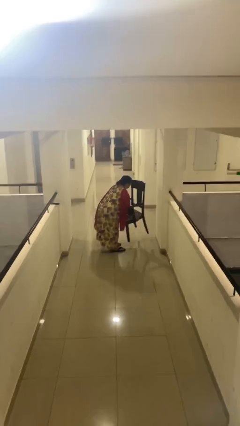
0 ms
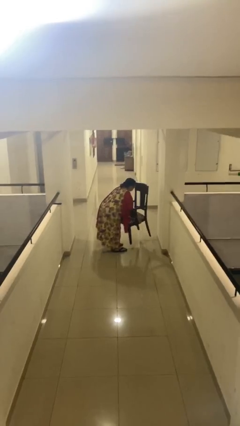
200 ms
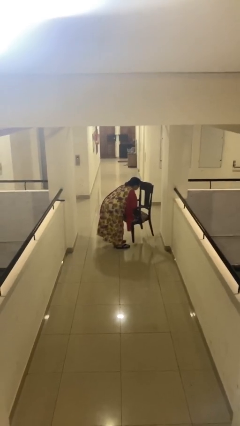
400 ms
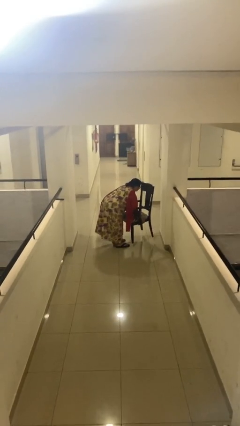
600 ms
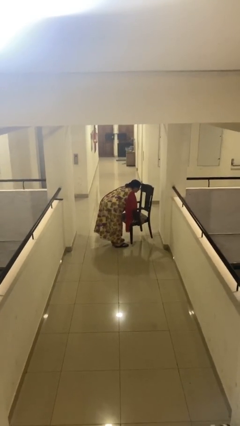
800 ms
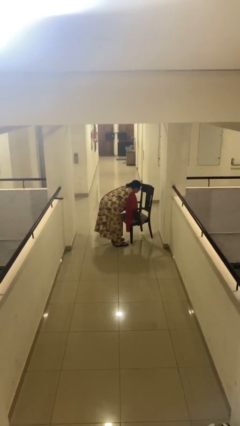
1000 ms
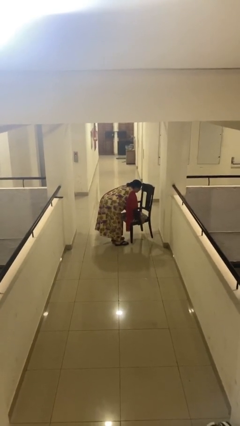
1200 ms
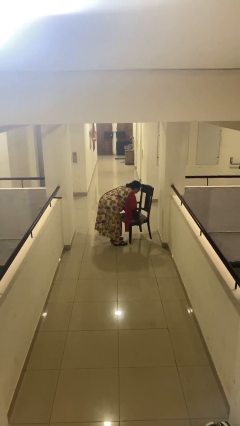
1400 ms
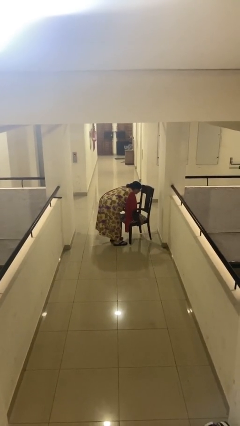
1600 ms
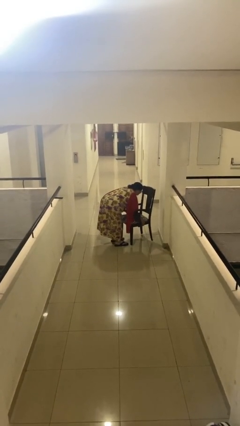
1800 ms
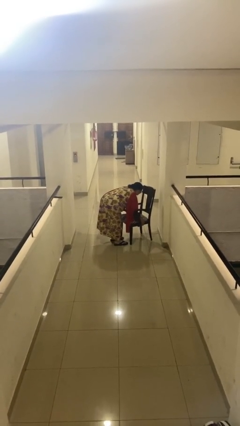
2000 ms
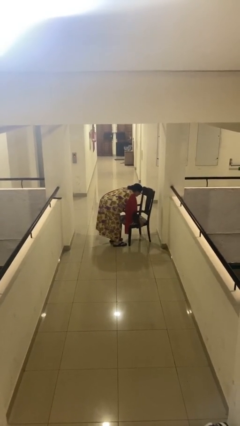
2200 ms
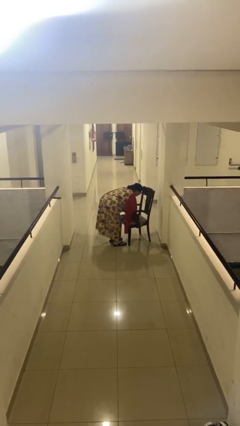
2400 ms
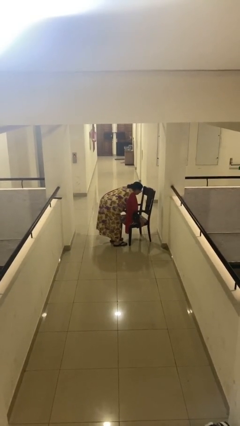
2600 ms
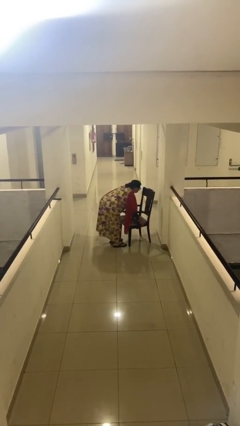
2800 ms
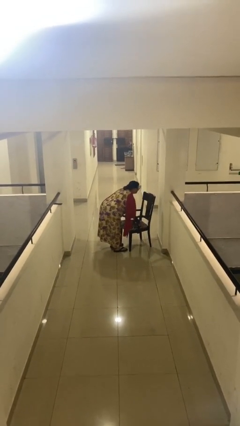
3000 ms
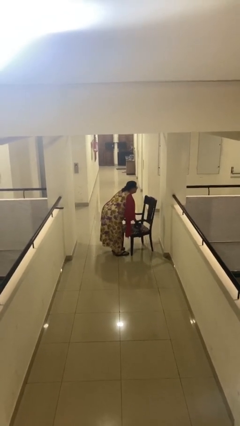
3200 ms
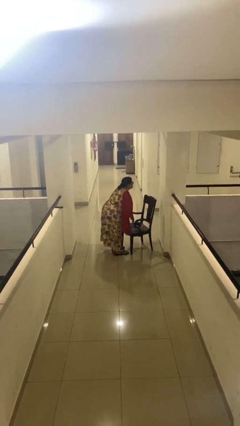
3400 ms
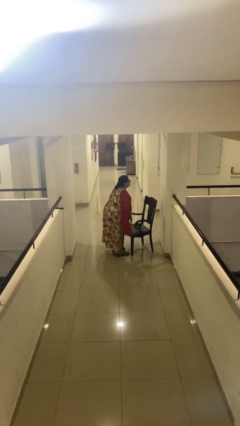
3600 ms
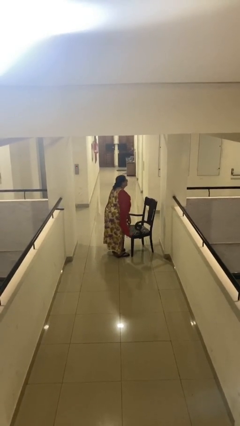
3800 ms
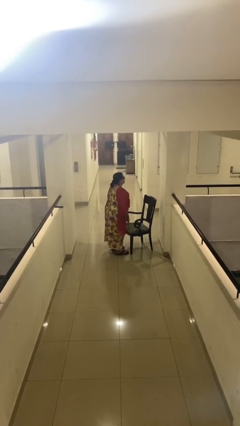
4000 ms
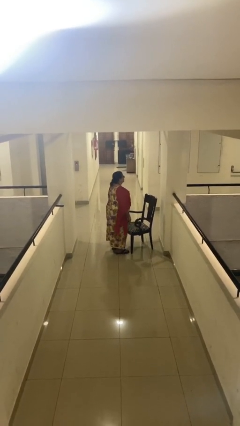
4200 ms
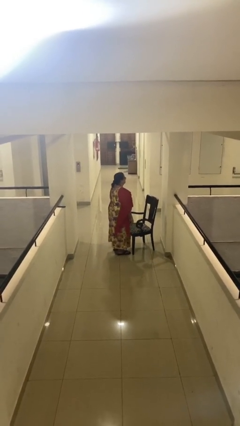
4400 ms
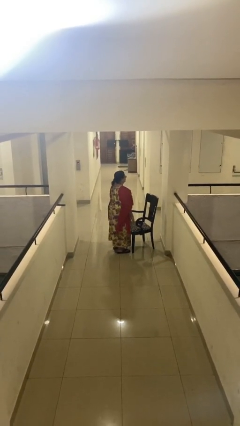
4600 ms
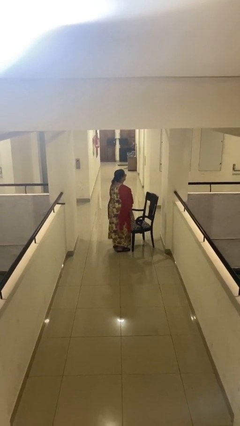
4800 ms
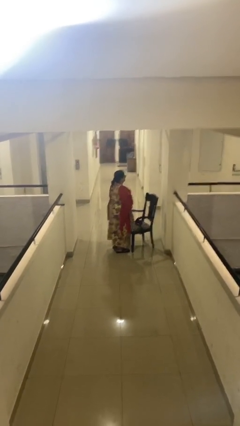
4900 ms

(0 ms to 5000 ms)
person puts down object on floor

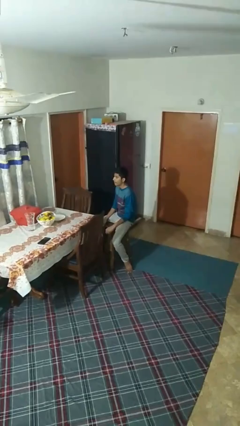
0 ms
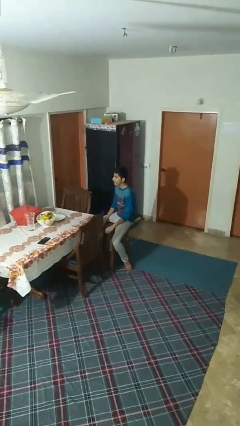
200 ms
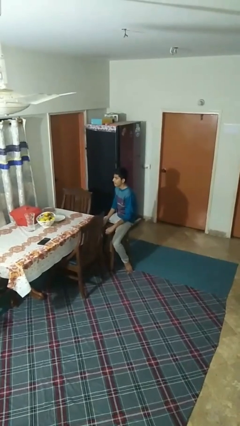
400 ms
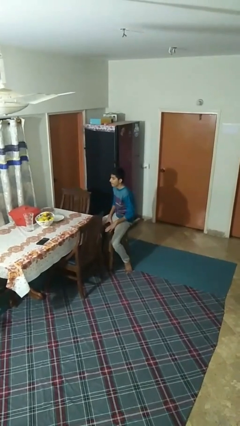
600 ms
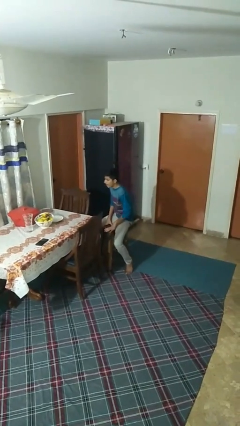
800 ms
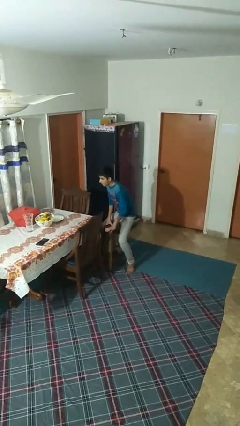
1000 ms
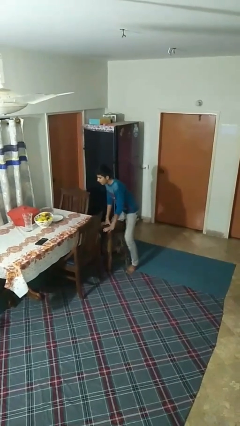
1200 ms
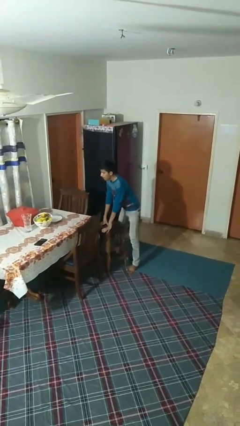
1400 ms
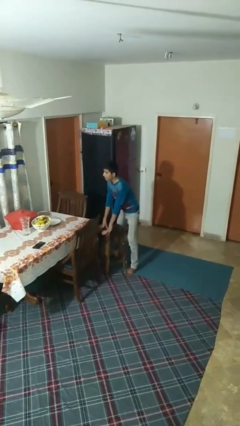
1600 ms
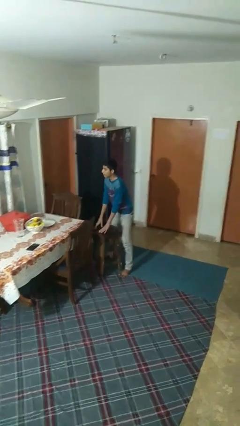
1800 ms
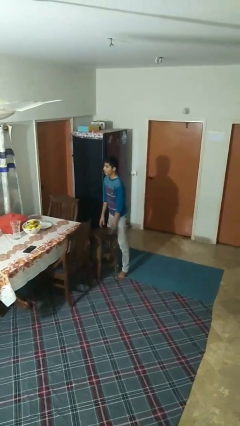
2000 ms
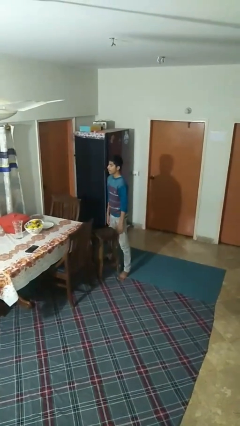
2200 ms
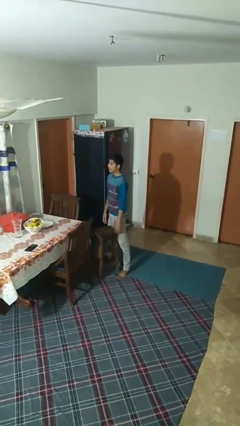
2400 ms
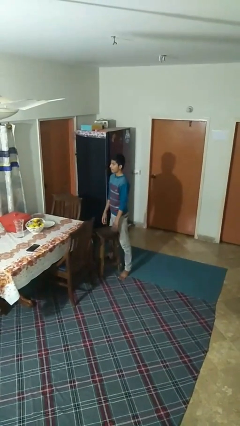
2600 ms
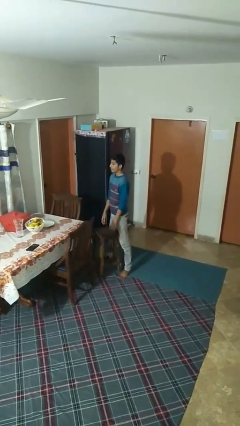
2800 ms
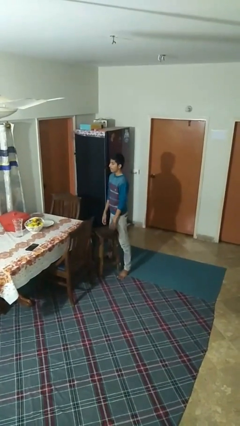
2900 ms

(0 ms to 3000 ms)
person stands up

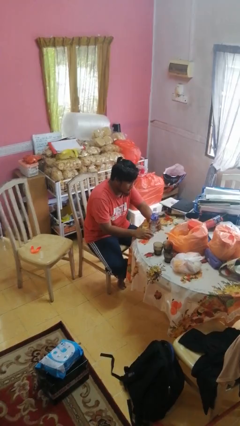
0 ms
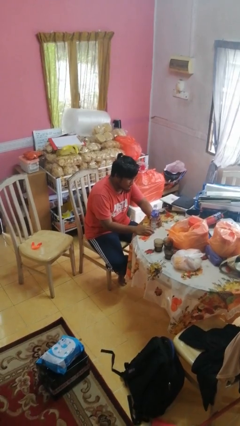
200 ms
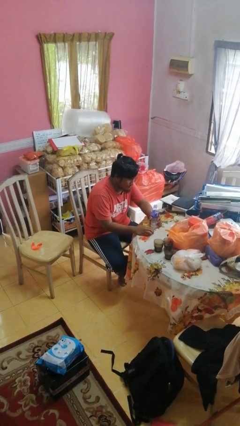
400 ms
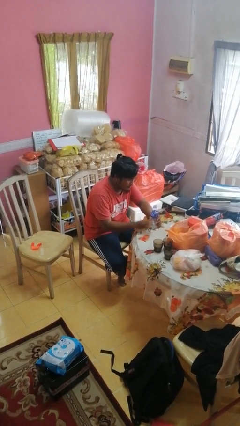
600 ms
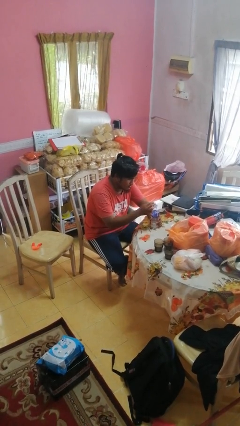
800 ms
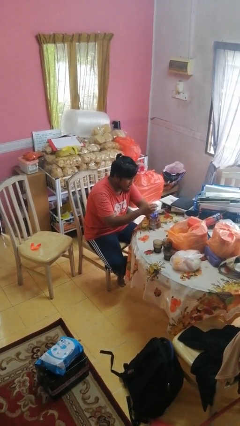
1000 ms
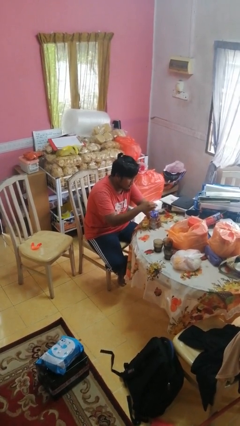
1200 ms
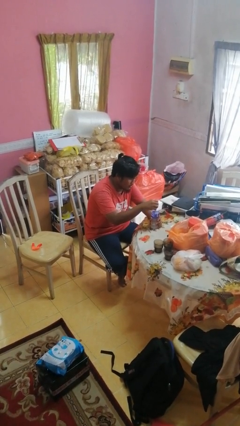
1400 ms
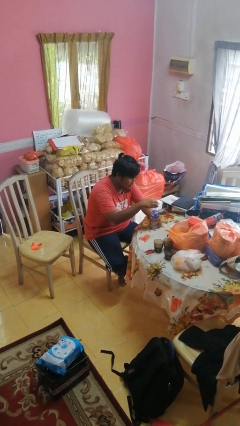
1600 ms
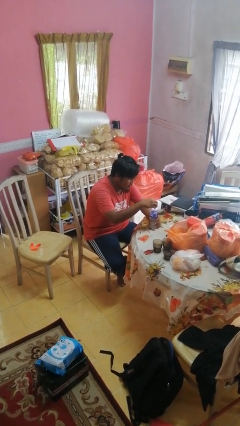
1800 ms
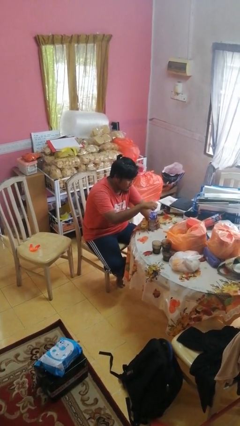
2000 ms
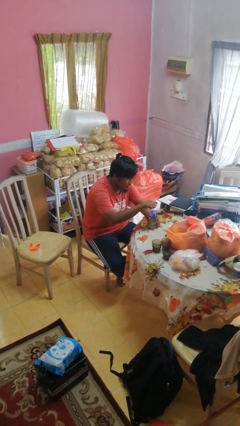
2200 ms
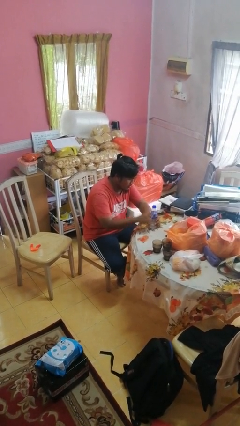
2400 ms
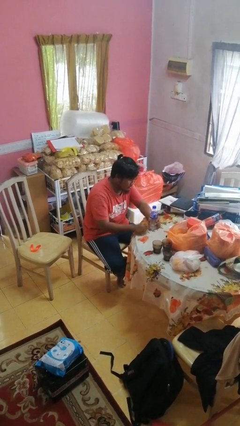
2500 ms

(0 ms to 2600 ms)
person screws lid to bottle

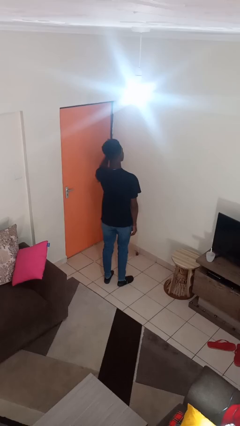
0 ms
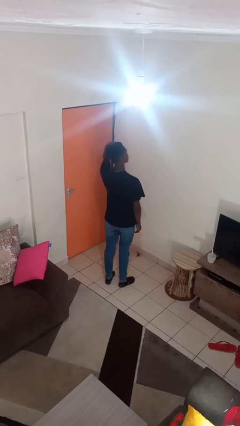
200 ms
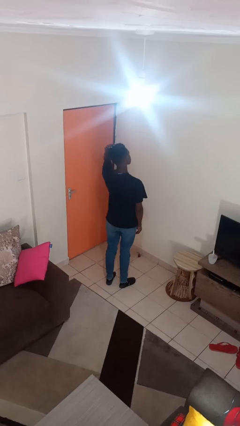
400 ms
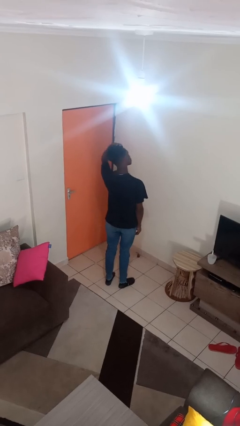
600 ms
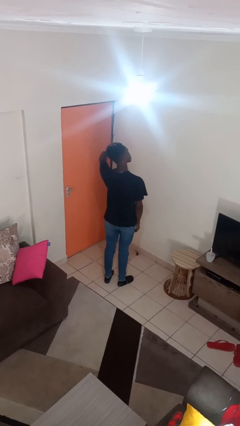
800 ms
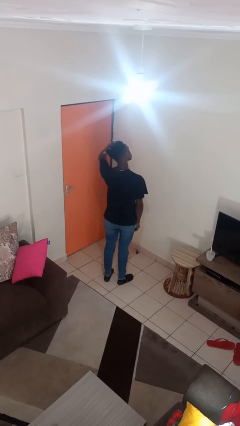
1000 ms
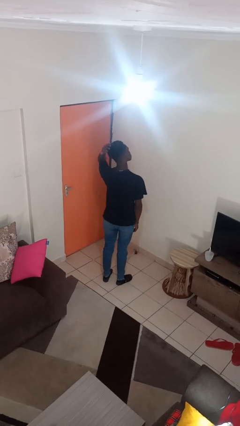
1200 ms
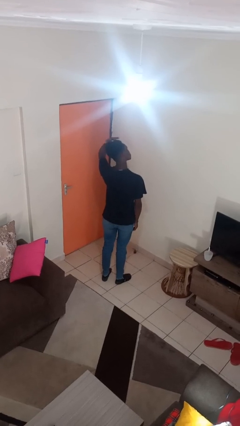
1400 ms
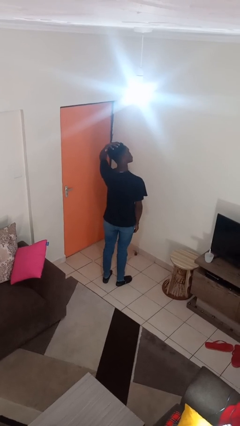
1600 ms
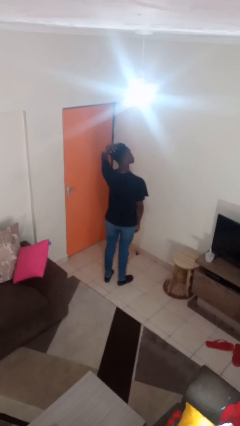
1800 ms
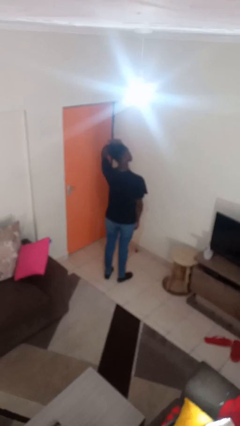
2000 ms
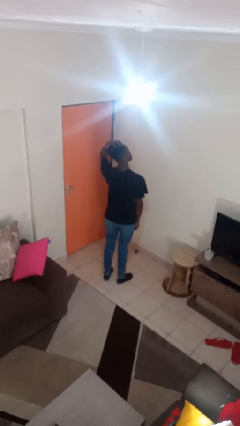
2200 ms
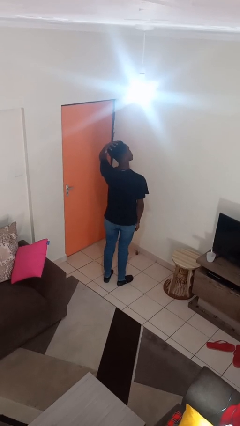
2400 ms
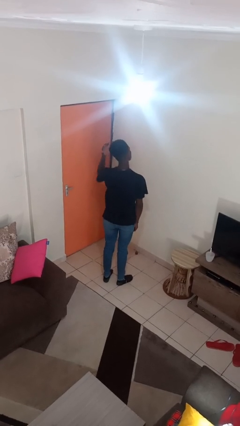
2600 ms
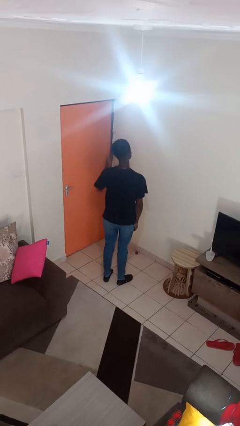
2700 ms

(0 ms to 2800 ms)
person strokes hair

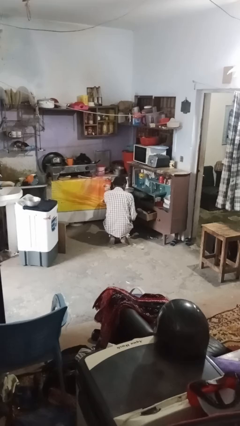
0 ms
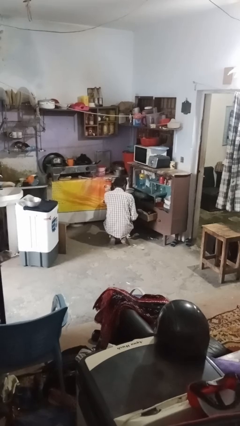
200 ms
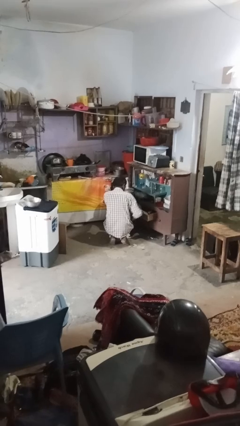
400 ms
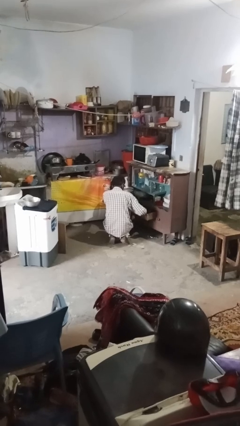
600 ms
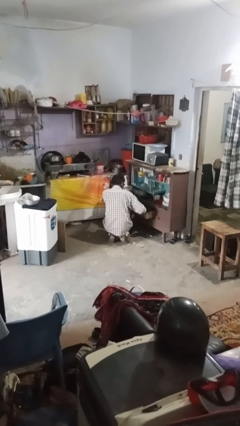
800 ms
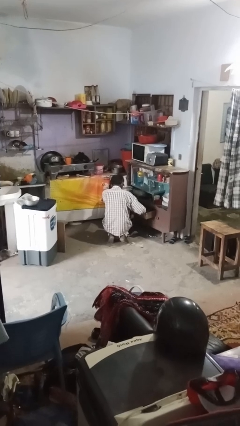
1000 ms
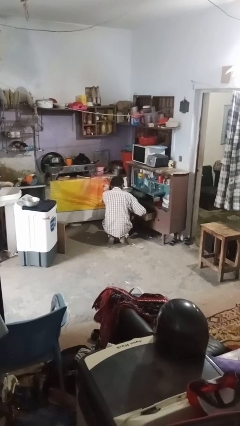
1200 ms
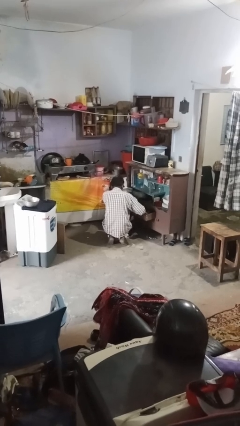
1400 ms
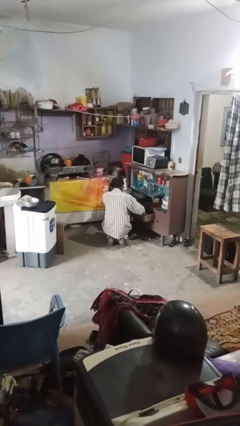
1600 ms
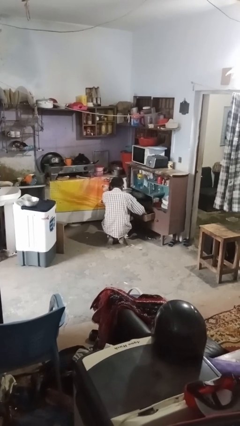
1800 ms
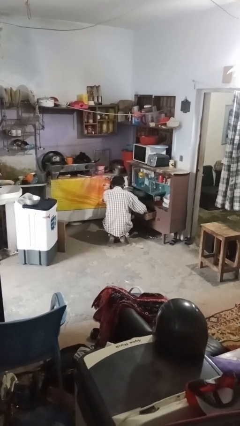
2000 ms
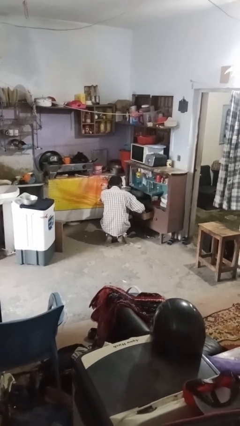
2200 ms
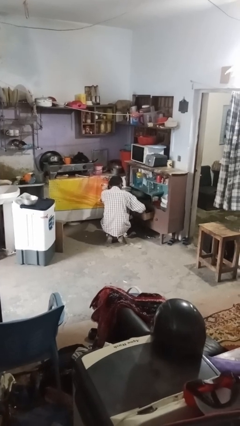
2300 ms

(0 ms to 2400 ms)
person searches in kitchen drawer

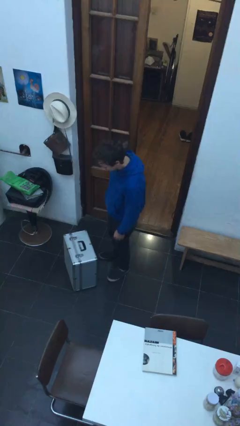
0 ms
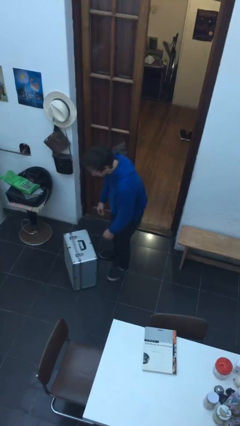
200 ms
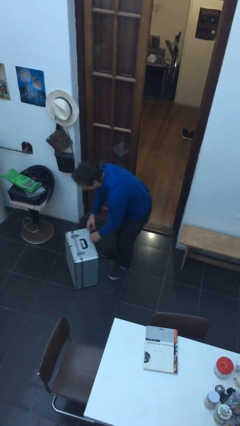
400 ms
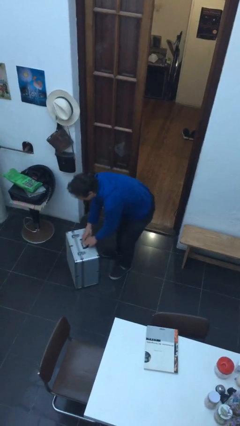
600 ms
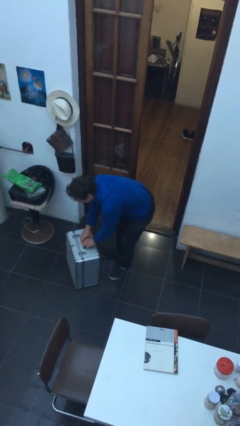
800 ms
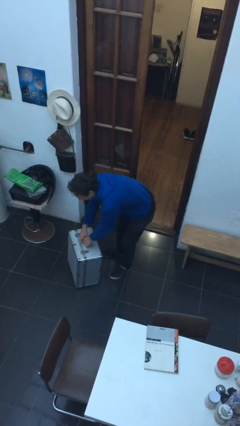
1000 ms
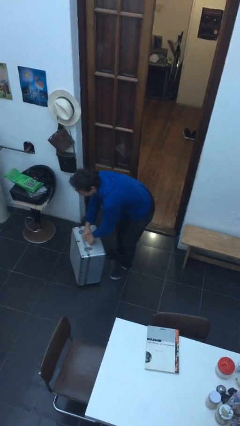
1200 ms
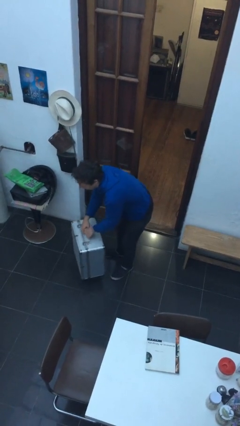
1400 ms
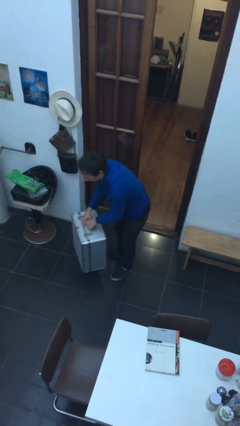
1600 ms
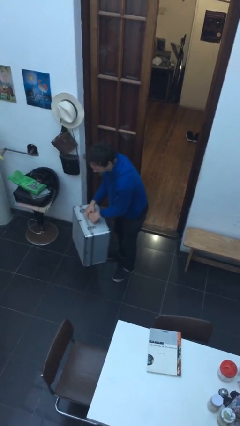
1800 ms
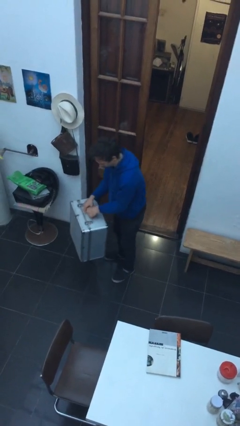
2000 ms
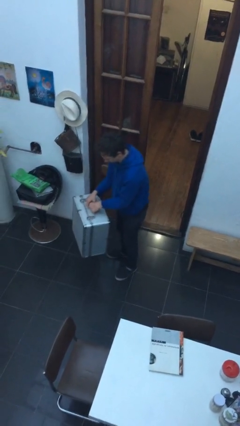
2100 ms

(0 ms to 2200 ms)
person picks up object from floor
